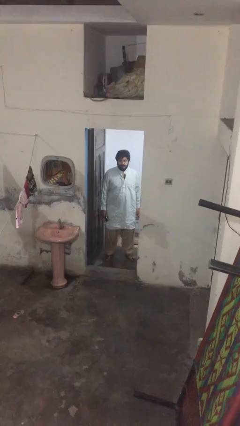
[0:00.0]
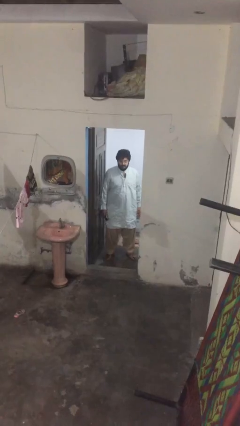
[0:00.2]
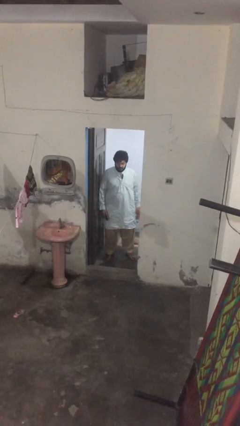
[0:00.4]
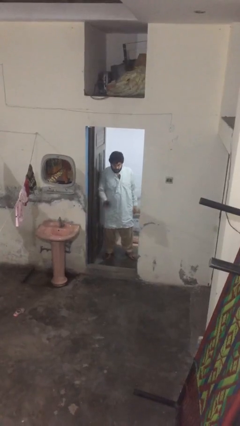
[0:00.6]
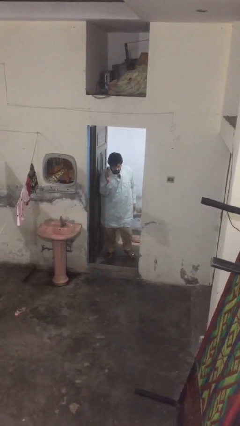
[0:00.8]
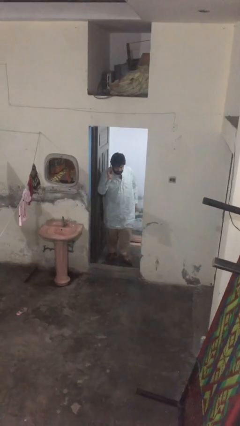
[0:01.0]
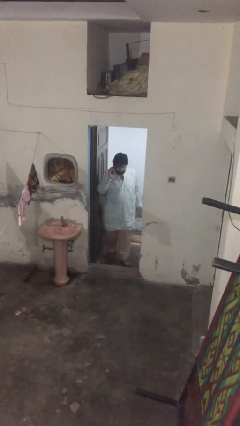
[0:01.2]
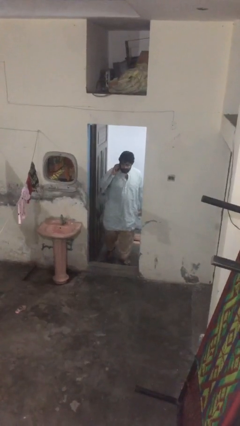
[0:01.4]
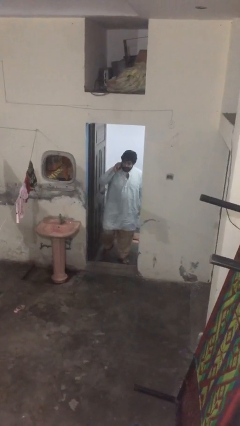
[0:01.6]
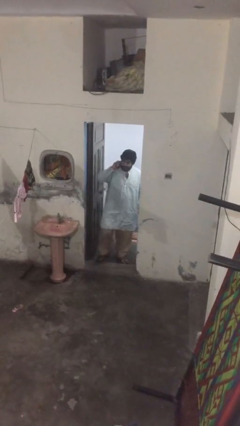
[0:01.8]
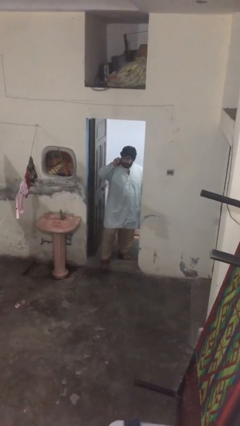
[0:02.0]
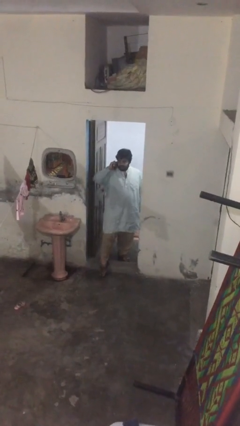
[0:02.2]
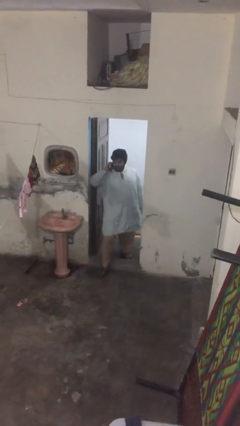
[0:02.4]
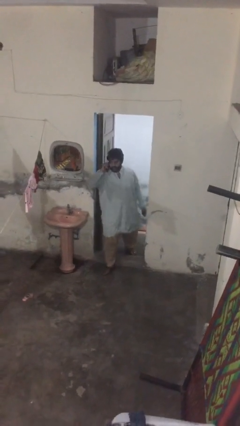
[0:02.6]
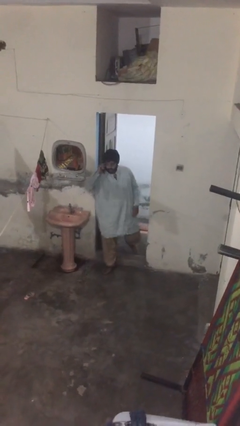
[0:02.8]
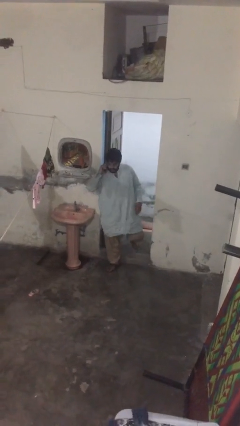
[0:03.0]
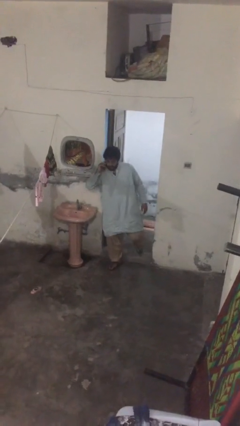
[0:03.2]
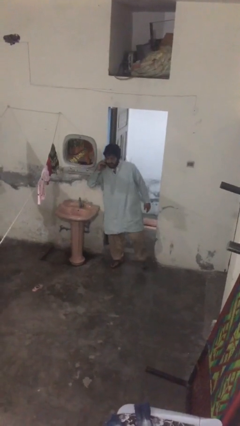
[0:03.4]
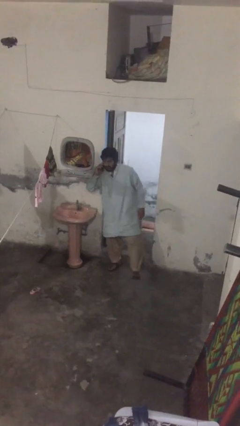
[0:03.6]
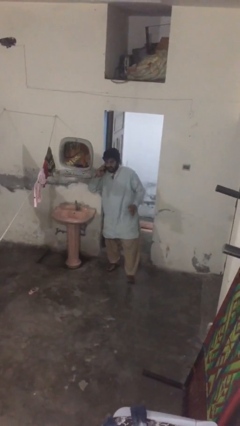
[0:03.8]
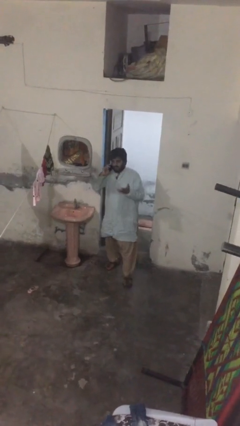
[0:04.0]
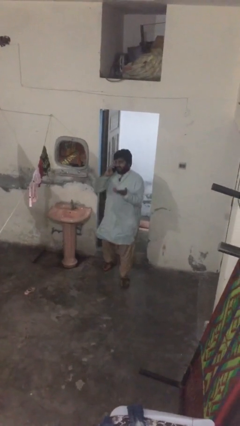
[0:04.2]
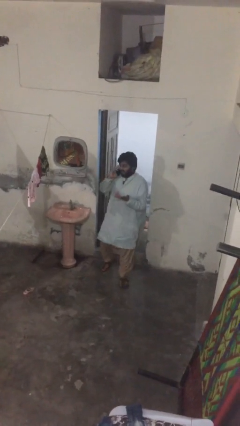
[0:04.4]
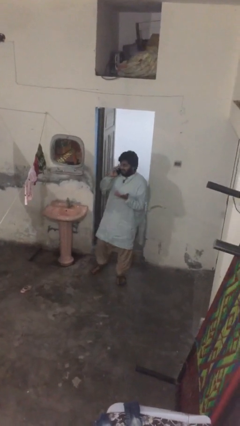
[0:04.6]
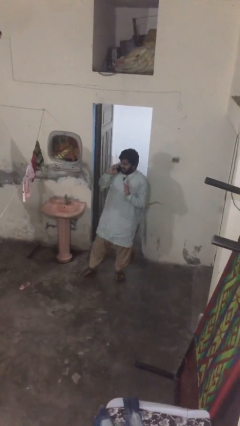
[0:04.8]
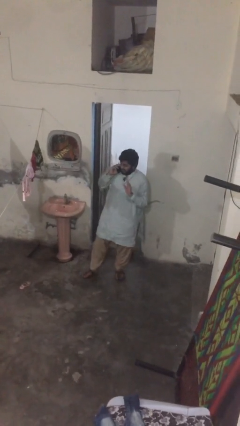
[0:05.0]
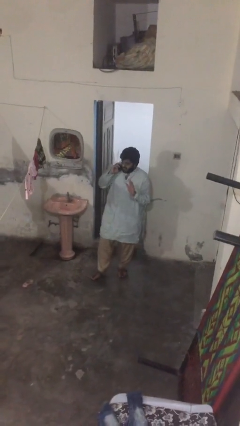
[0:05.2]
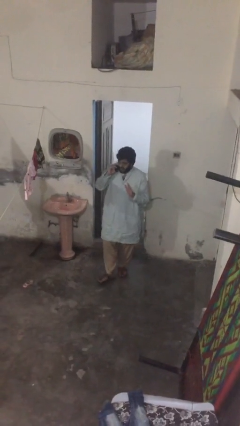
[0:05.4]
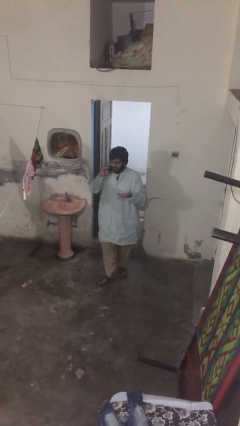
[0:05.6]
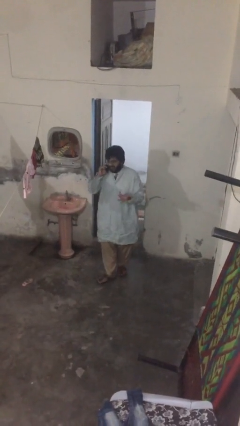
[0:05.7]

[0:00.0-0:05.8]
person enters scene through structure

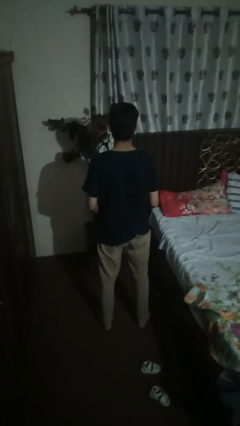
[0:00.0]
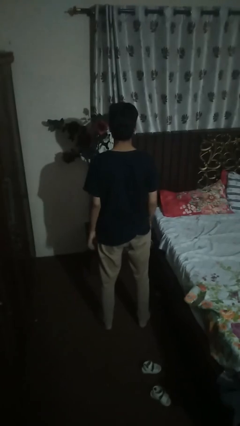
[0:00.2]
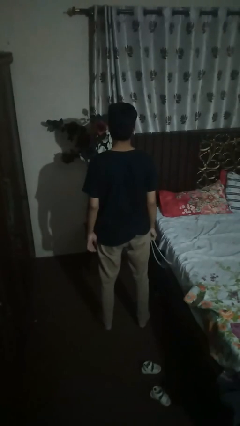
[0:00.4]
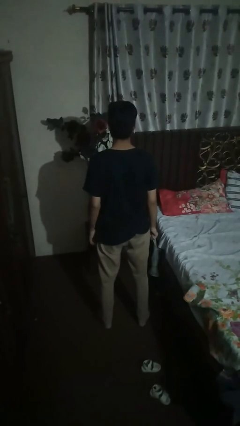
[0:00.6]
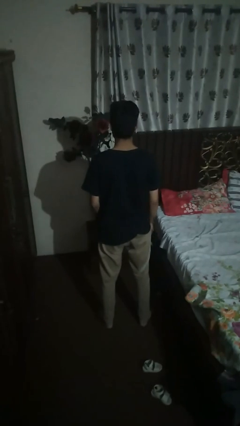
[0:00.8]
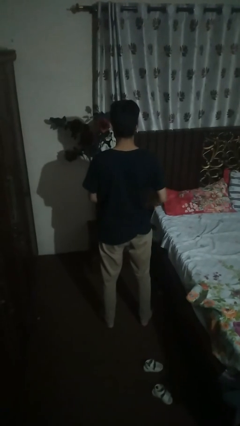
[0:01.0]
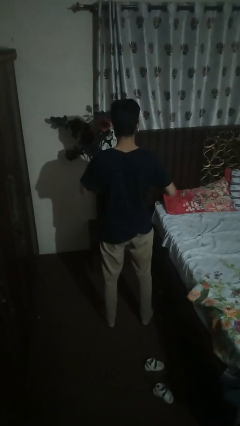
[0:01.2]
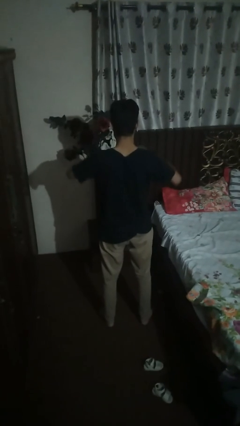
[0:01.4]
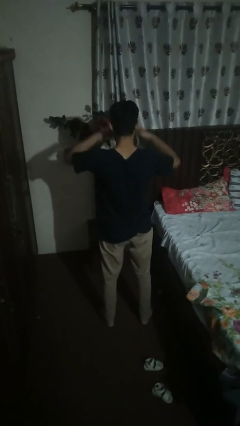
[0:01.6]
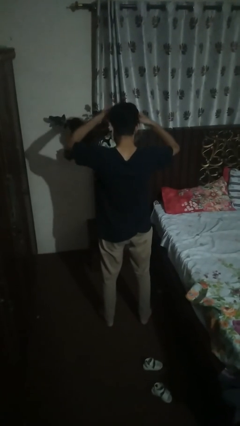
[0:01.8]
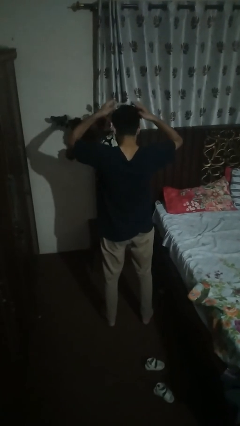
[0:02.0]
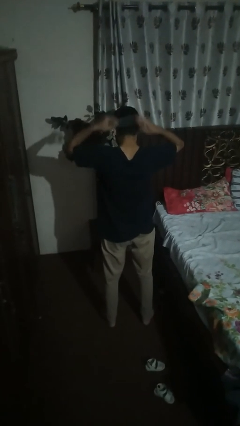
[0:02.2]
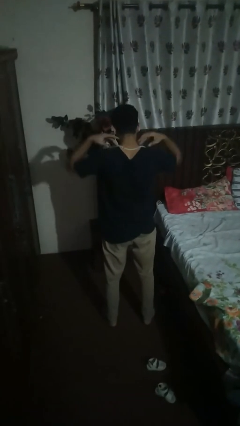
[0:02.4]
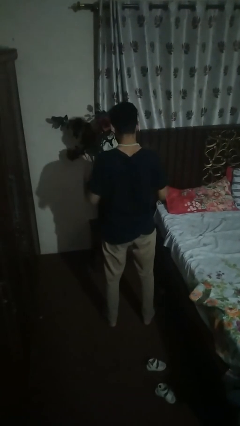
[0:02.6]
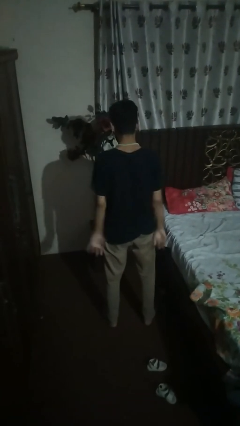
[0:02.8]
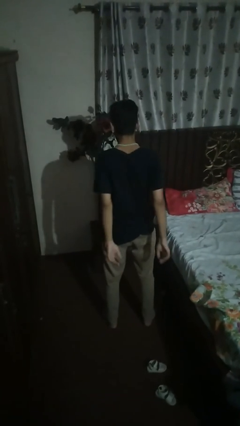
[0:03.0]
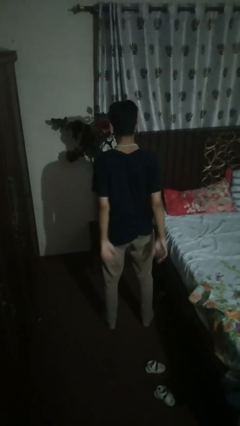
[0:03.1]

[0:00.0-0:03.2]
person puts on necklace

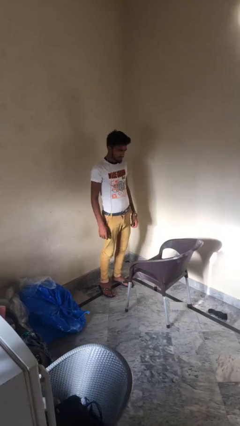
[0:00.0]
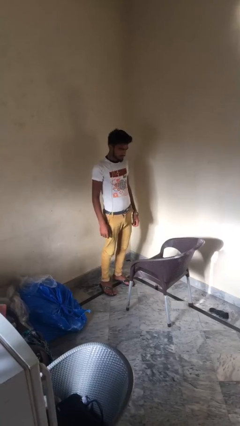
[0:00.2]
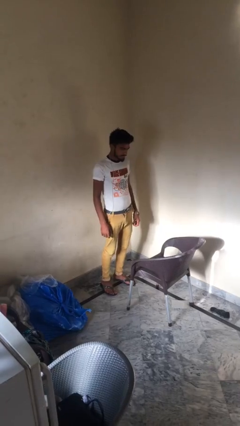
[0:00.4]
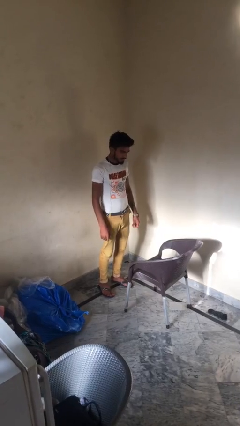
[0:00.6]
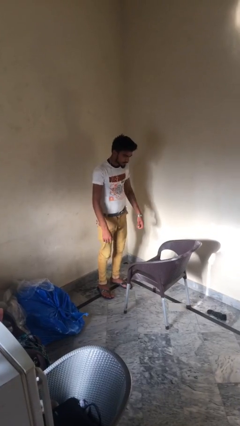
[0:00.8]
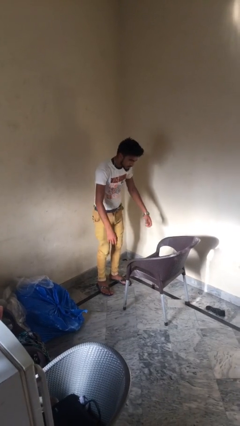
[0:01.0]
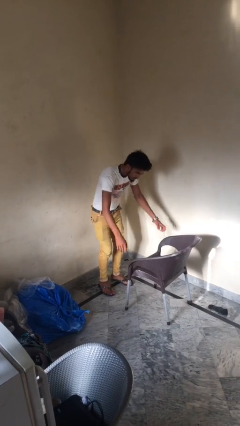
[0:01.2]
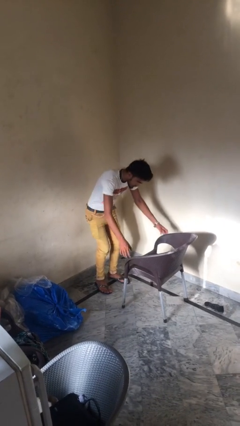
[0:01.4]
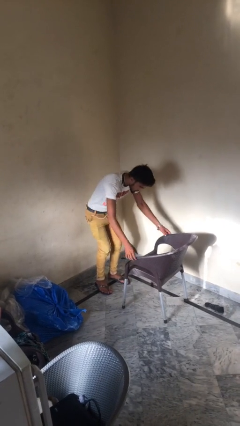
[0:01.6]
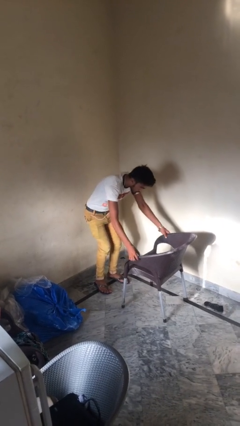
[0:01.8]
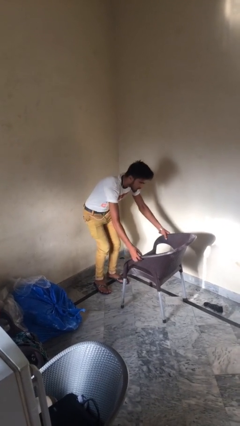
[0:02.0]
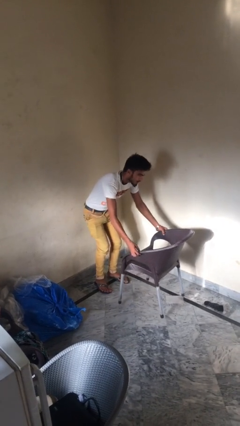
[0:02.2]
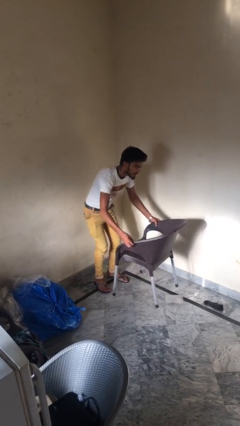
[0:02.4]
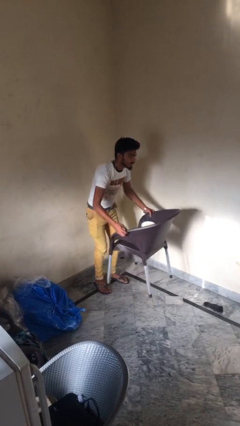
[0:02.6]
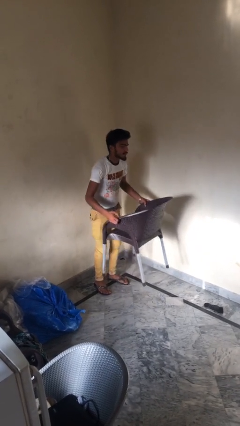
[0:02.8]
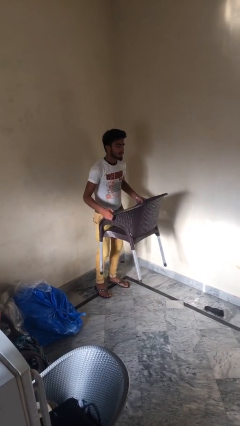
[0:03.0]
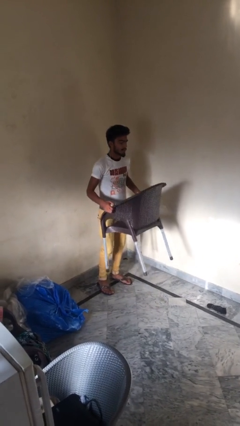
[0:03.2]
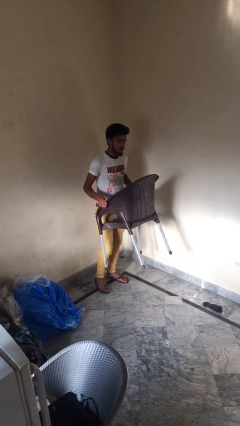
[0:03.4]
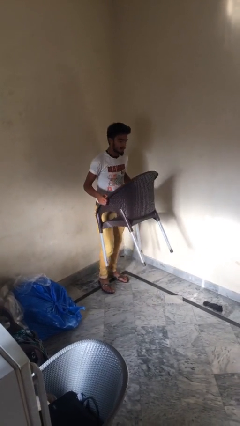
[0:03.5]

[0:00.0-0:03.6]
person picks up object from floor

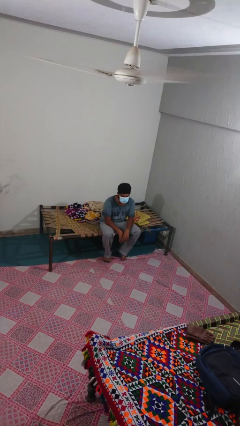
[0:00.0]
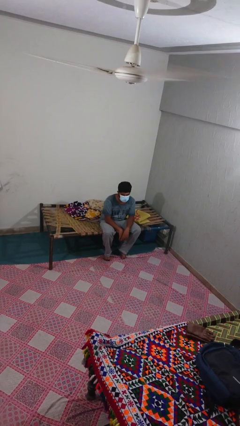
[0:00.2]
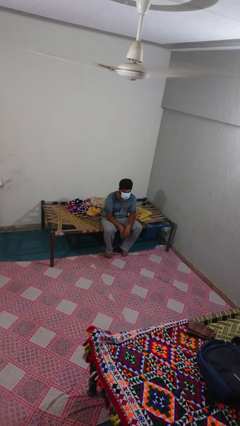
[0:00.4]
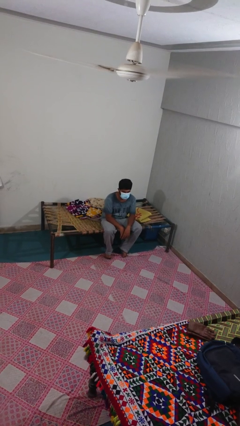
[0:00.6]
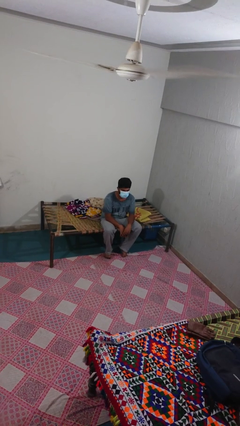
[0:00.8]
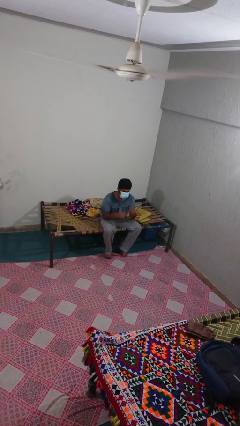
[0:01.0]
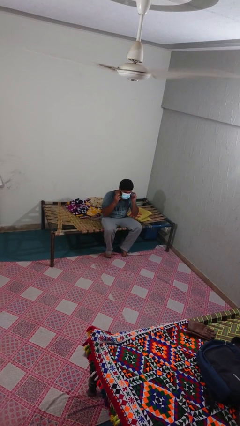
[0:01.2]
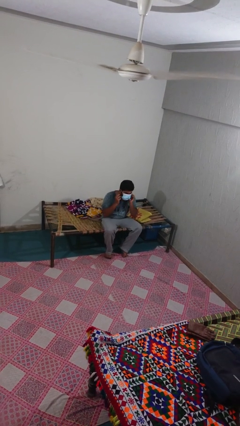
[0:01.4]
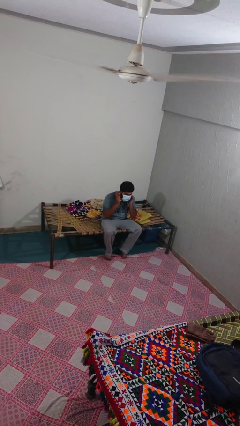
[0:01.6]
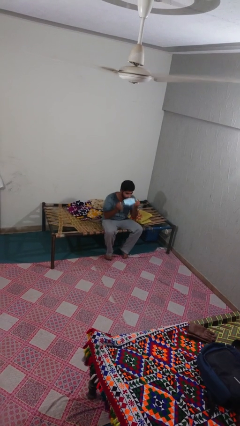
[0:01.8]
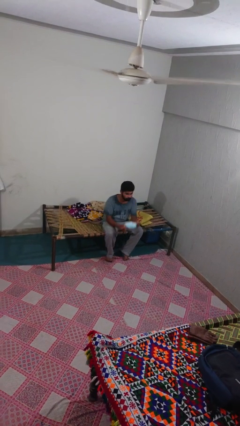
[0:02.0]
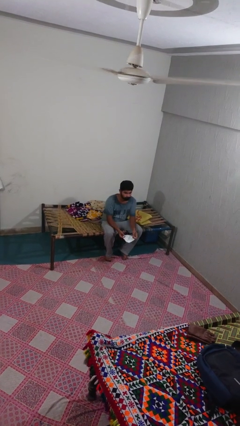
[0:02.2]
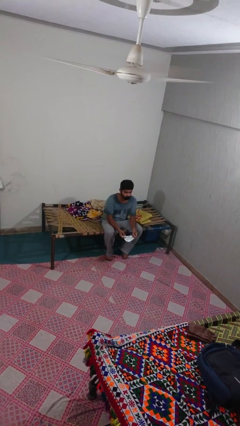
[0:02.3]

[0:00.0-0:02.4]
person takes off facemask

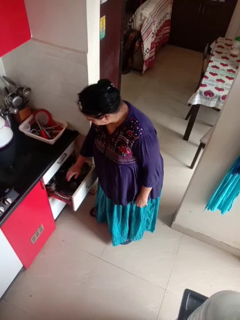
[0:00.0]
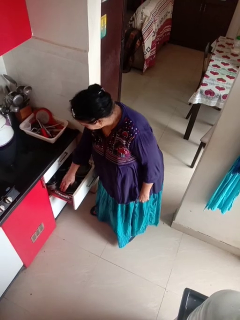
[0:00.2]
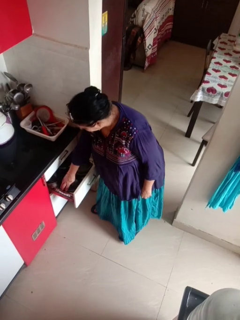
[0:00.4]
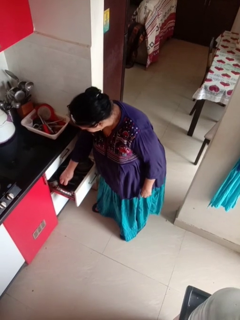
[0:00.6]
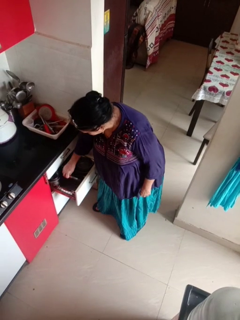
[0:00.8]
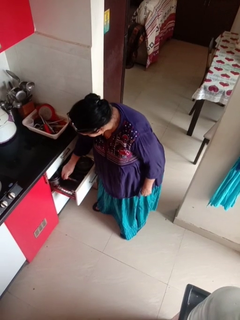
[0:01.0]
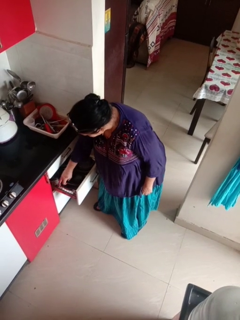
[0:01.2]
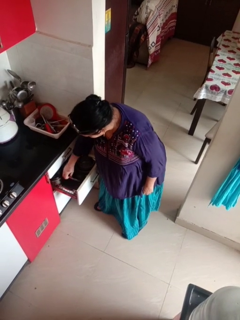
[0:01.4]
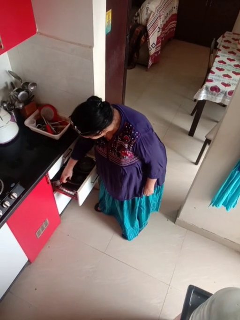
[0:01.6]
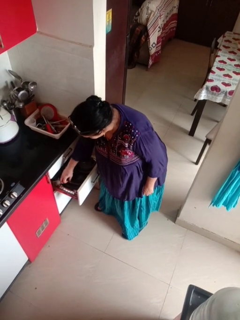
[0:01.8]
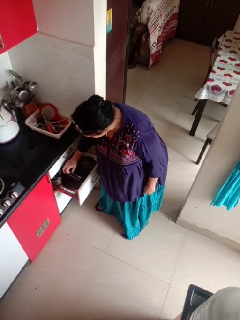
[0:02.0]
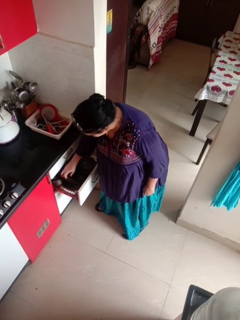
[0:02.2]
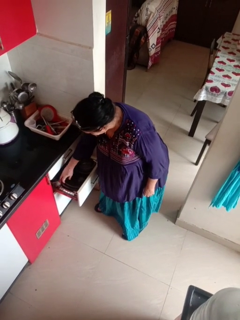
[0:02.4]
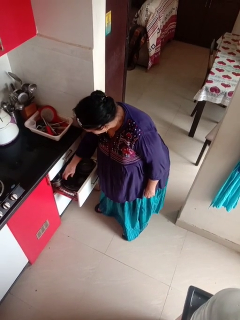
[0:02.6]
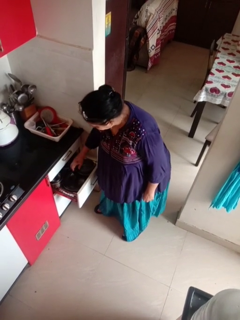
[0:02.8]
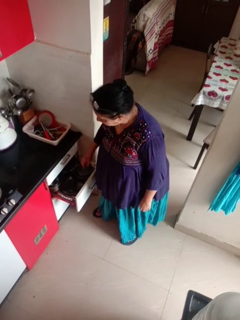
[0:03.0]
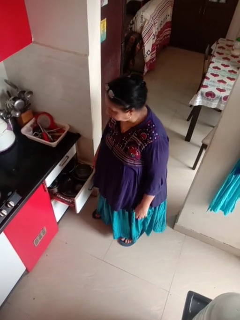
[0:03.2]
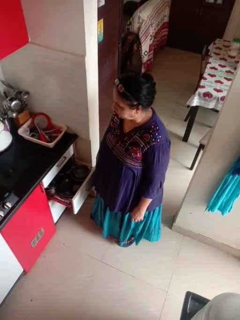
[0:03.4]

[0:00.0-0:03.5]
person searches in kitchen drawer
